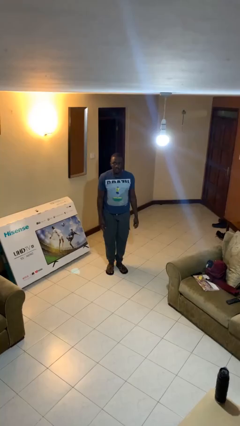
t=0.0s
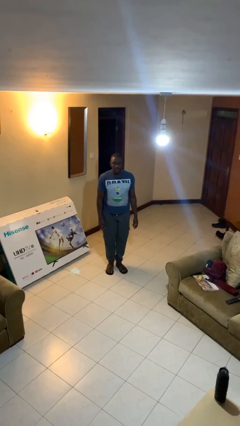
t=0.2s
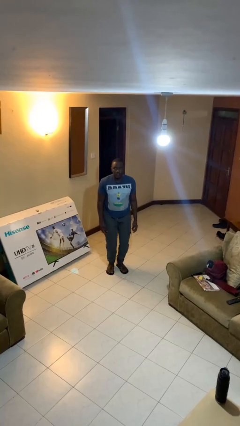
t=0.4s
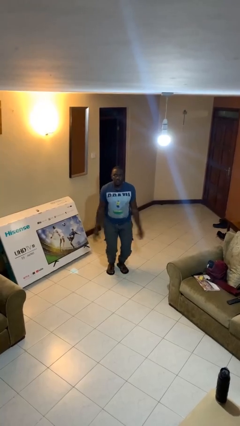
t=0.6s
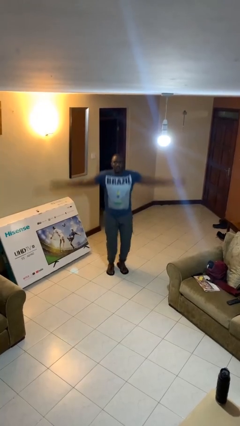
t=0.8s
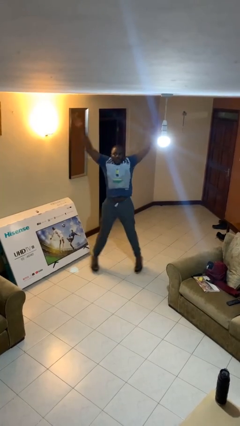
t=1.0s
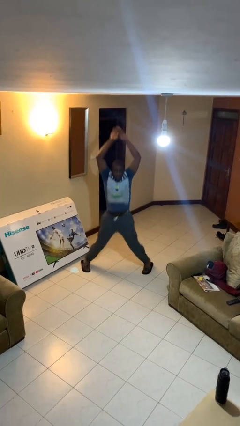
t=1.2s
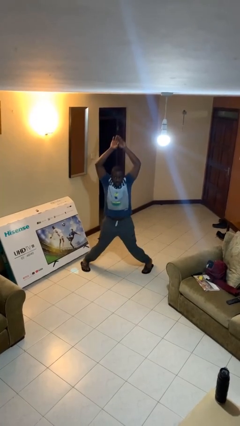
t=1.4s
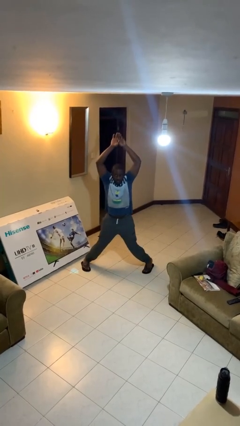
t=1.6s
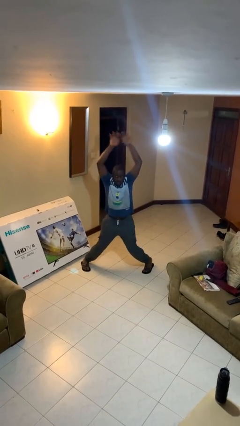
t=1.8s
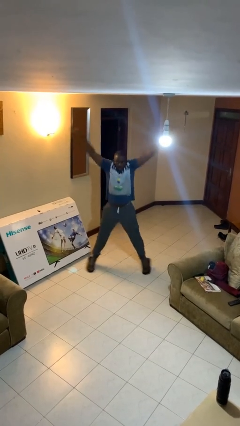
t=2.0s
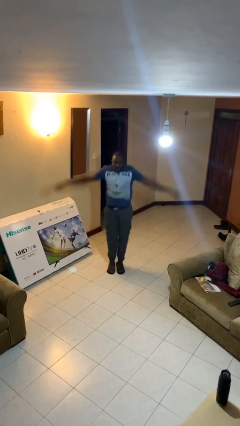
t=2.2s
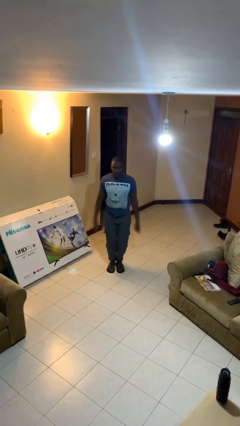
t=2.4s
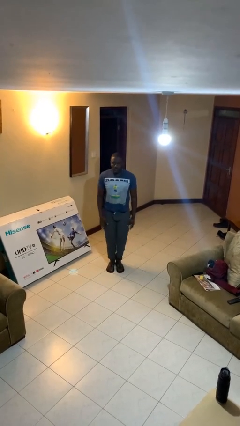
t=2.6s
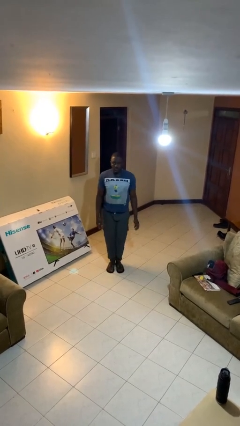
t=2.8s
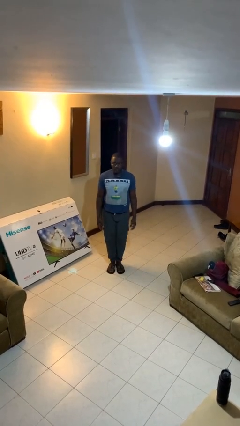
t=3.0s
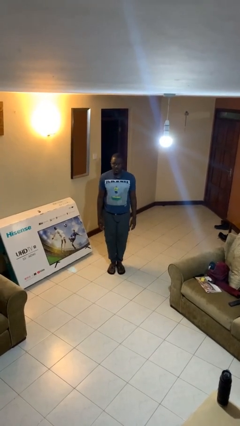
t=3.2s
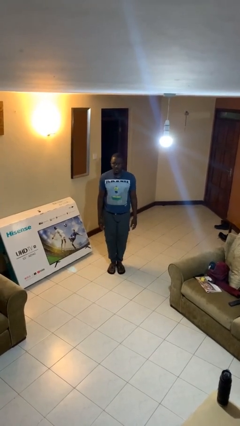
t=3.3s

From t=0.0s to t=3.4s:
person exercises with jumping jacks

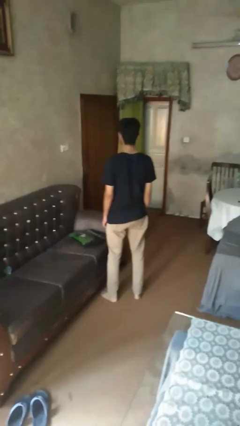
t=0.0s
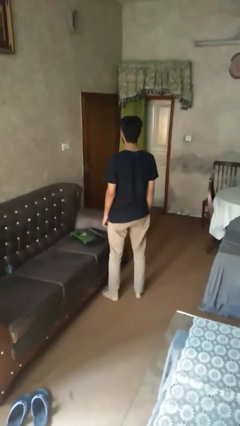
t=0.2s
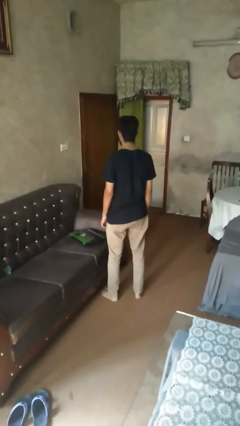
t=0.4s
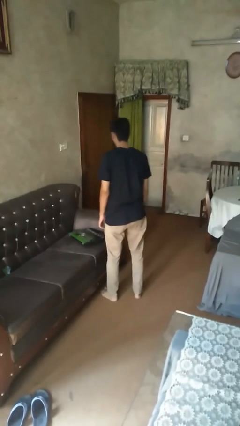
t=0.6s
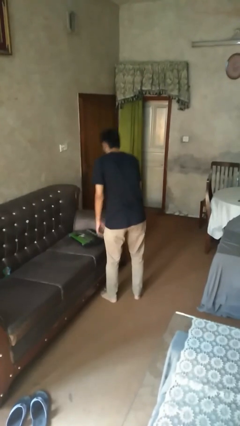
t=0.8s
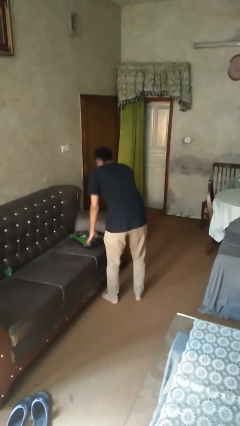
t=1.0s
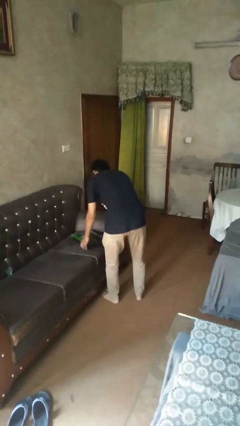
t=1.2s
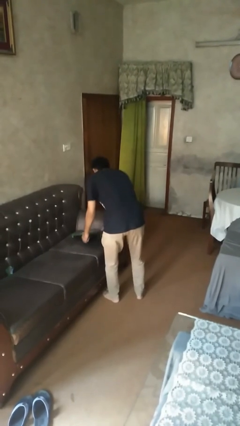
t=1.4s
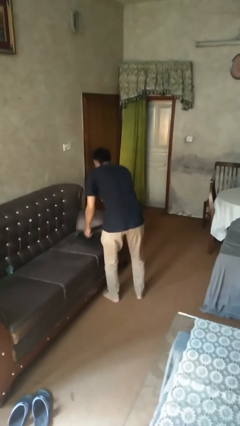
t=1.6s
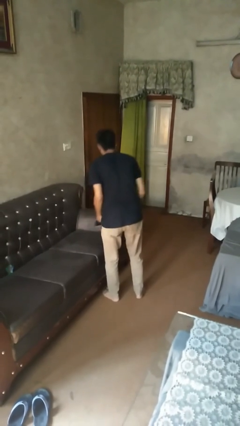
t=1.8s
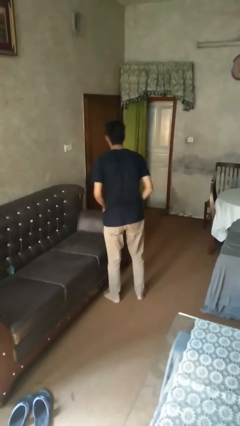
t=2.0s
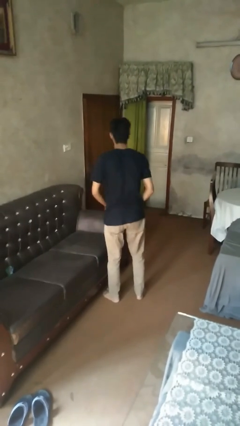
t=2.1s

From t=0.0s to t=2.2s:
person picks up object from couch

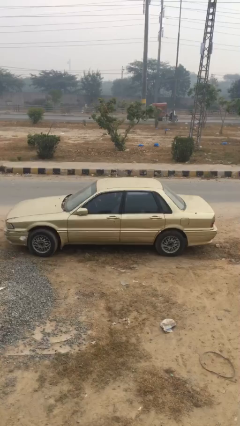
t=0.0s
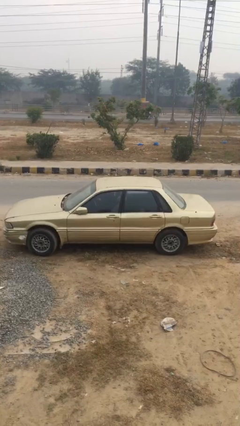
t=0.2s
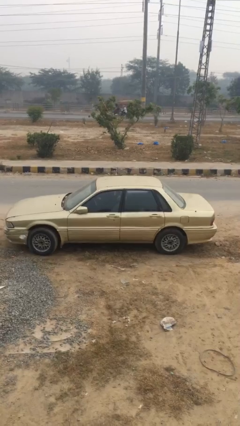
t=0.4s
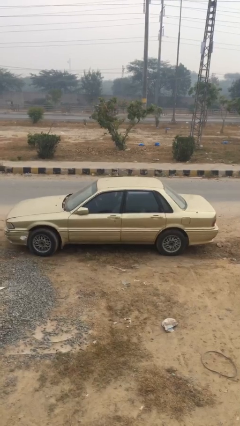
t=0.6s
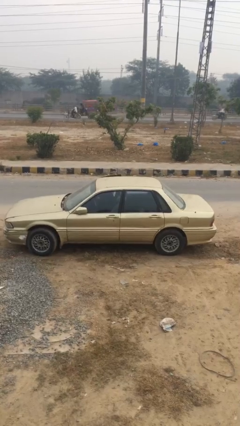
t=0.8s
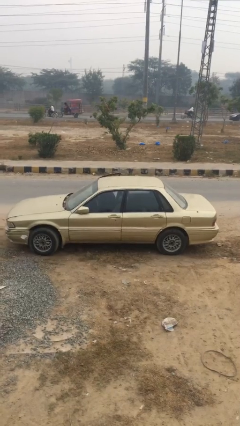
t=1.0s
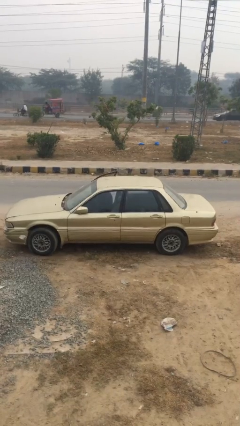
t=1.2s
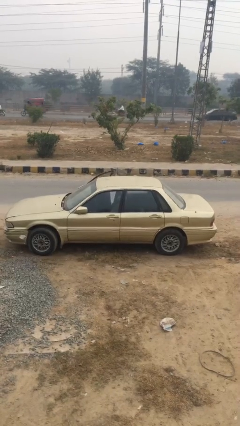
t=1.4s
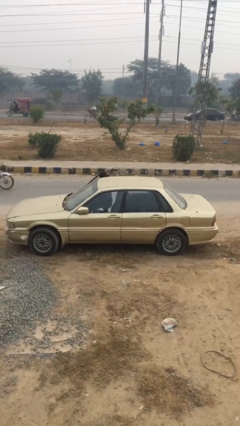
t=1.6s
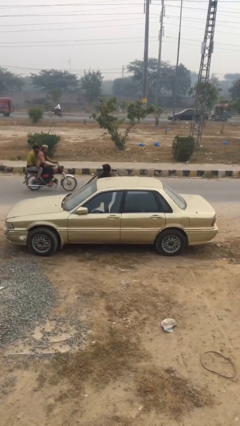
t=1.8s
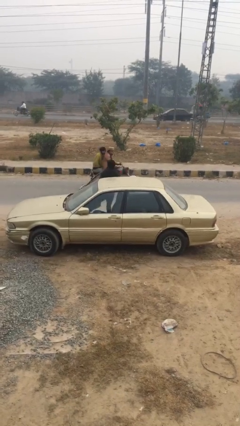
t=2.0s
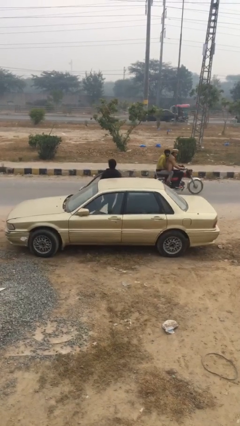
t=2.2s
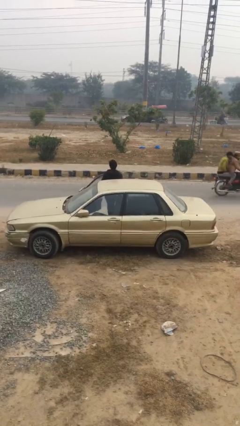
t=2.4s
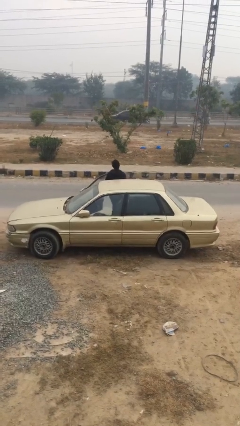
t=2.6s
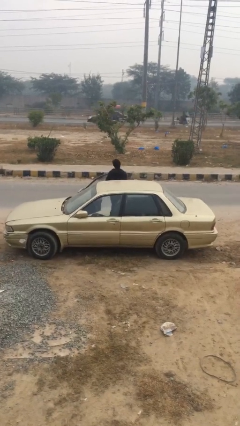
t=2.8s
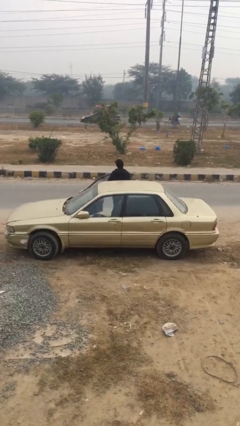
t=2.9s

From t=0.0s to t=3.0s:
car drops off person

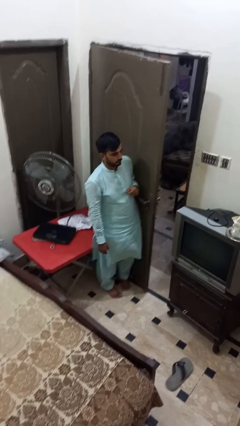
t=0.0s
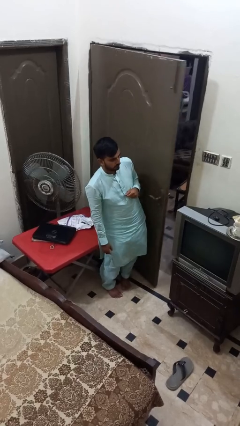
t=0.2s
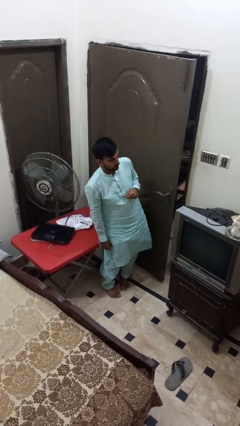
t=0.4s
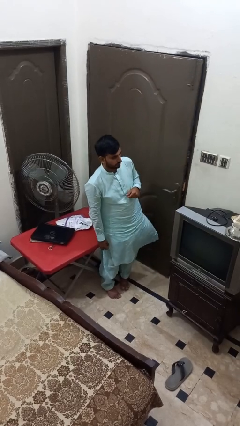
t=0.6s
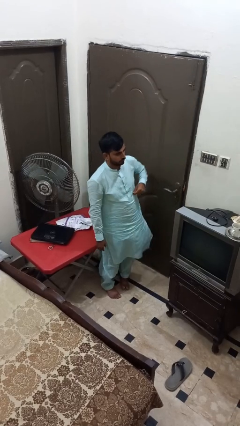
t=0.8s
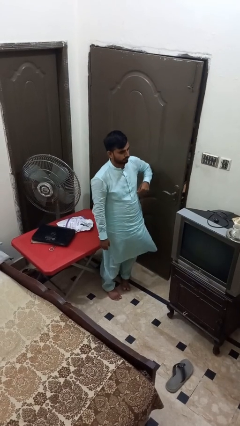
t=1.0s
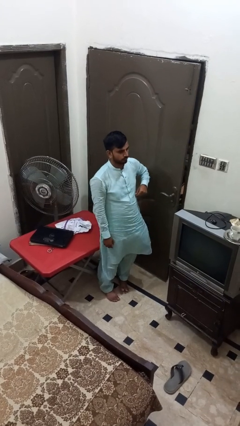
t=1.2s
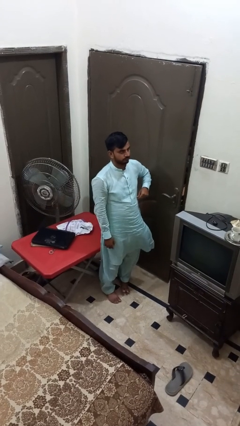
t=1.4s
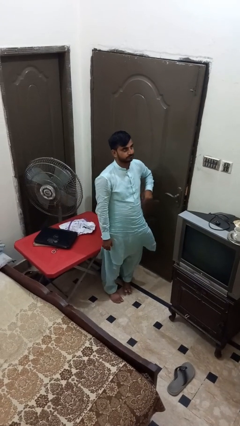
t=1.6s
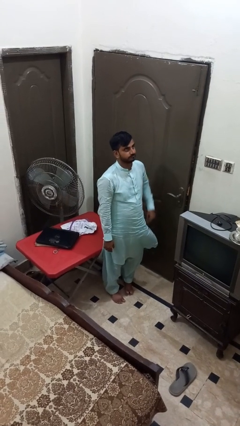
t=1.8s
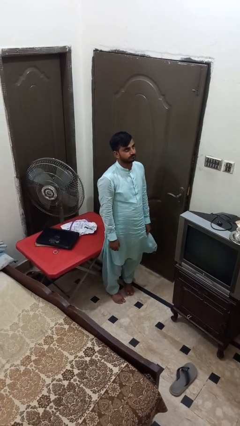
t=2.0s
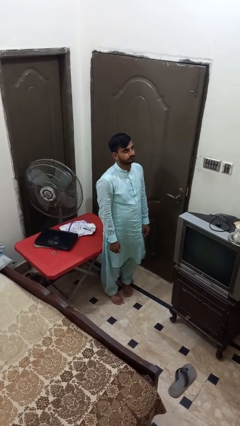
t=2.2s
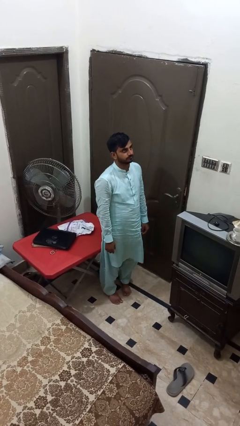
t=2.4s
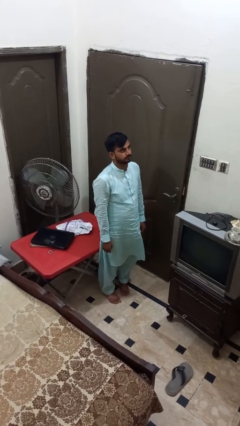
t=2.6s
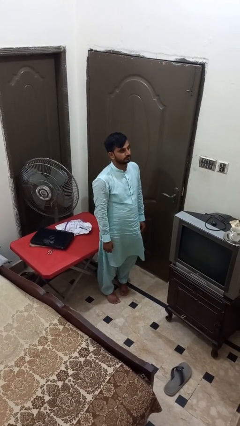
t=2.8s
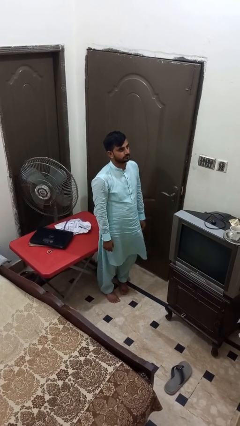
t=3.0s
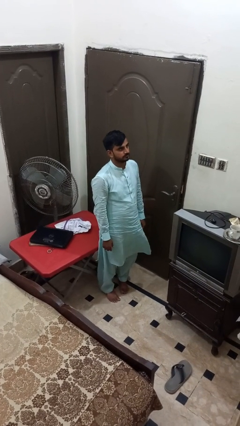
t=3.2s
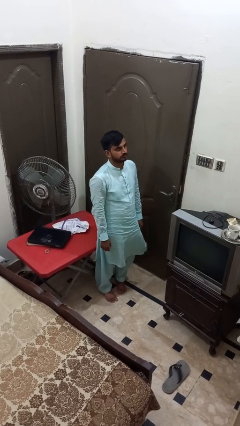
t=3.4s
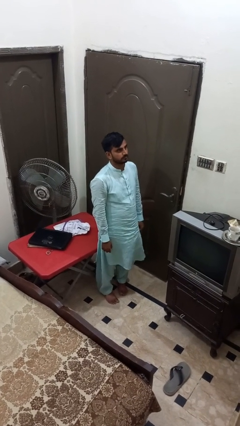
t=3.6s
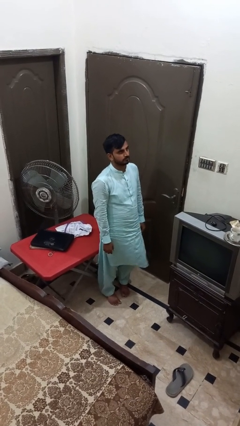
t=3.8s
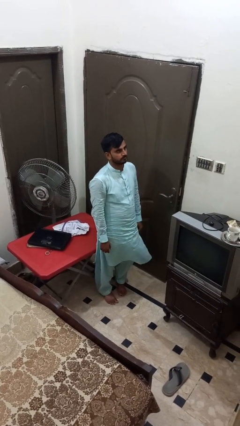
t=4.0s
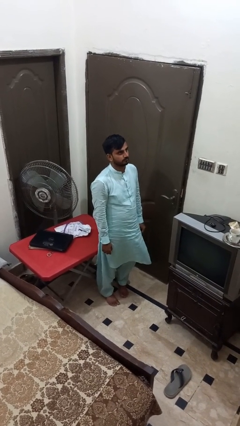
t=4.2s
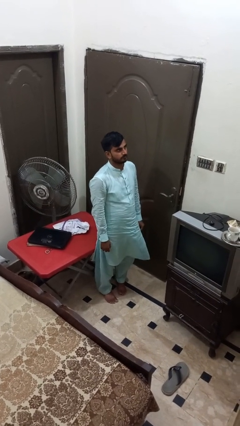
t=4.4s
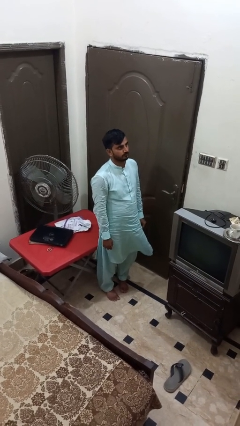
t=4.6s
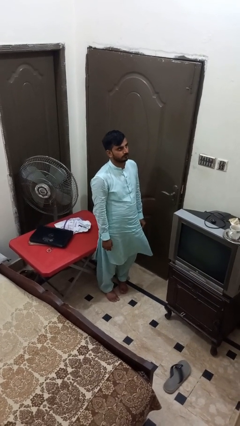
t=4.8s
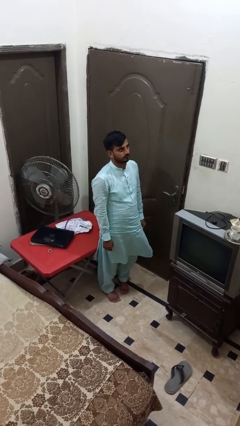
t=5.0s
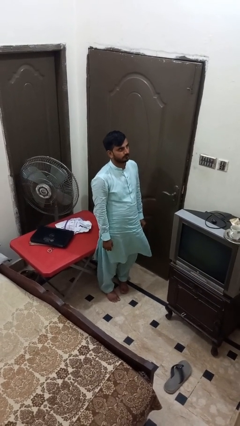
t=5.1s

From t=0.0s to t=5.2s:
person closes door with hip

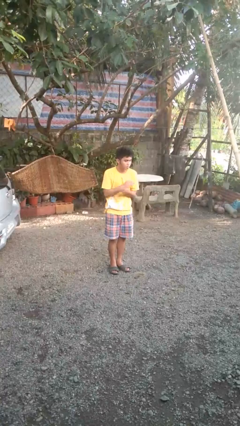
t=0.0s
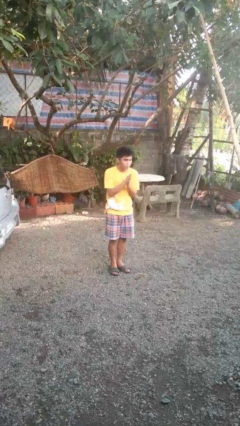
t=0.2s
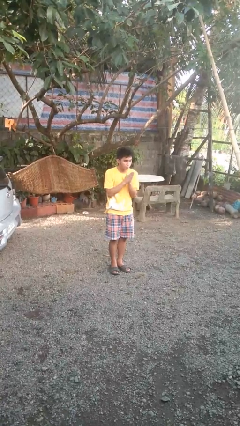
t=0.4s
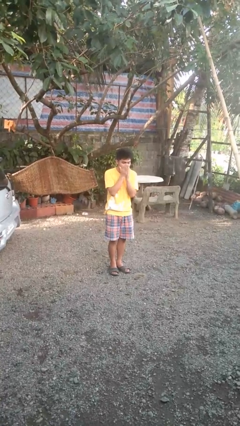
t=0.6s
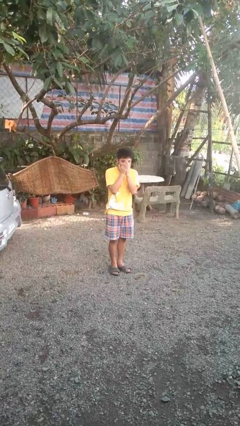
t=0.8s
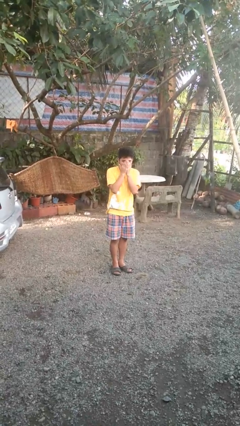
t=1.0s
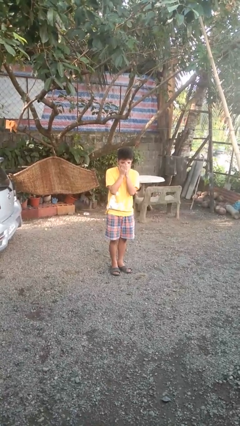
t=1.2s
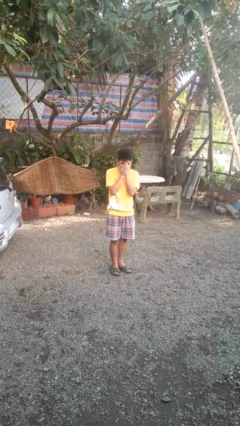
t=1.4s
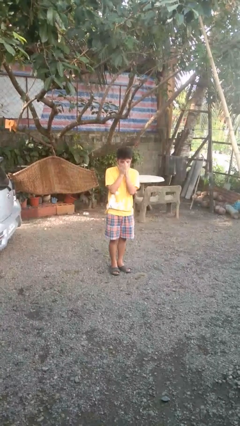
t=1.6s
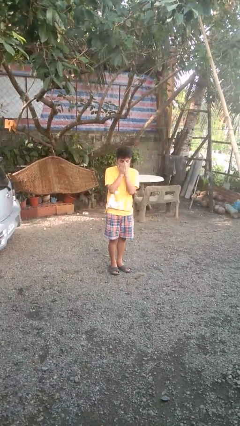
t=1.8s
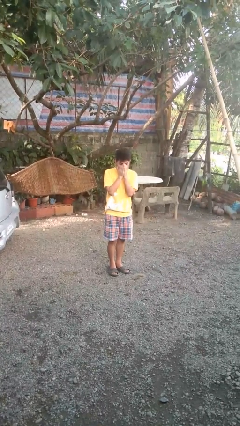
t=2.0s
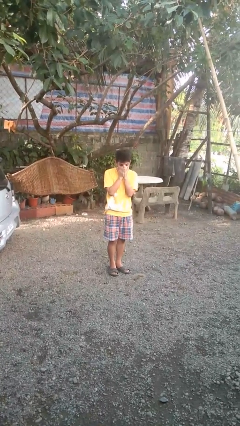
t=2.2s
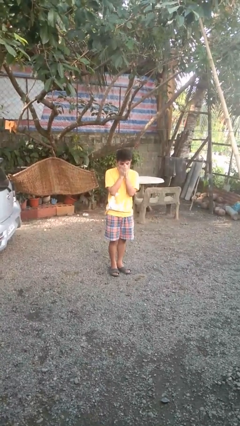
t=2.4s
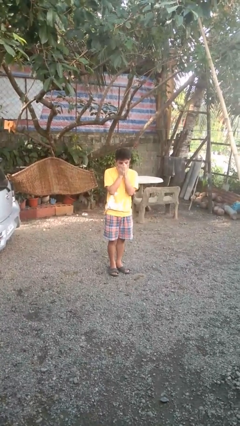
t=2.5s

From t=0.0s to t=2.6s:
person blows into hands

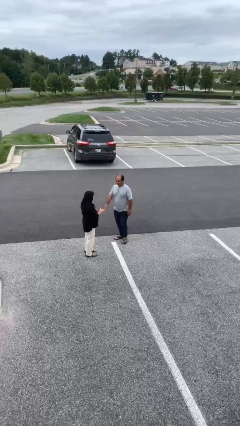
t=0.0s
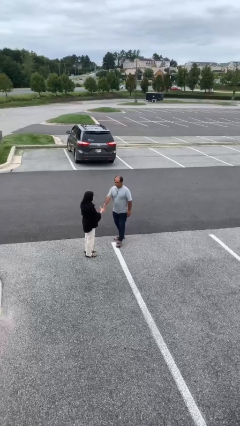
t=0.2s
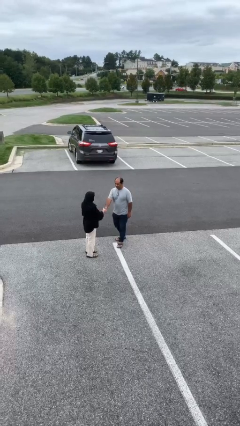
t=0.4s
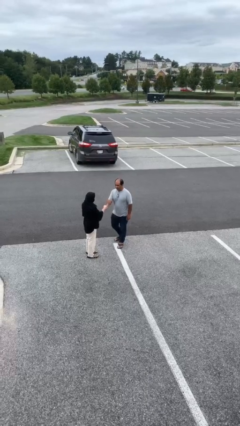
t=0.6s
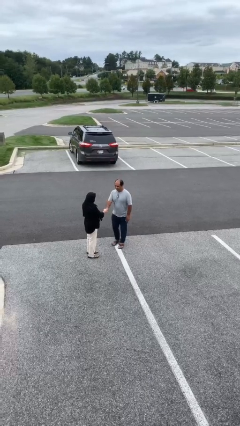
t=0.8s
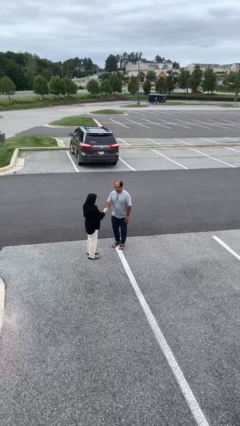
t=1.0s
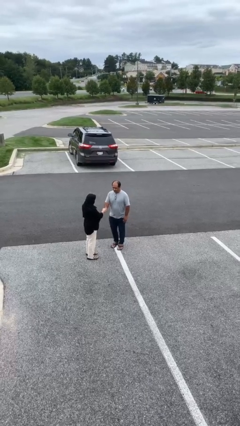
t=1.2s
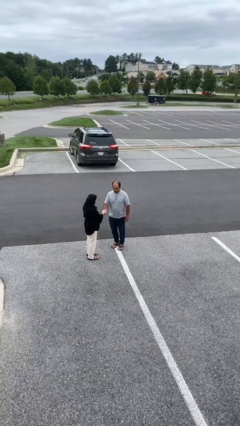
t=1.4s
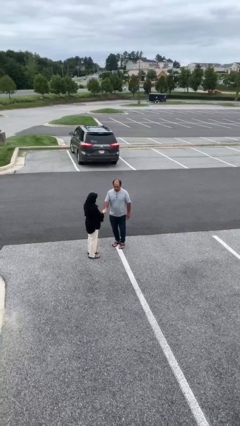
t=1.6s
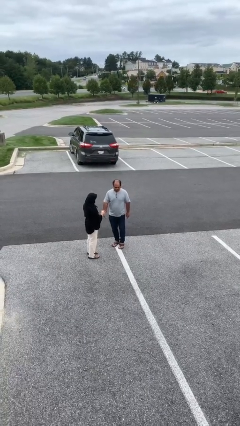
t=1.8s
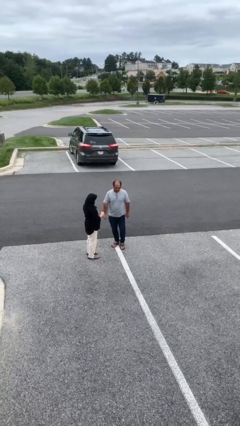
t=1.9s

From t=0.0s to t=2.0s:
person shakes hand
